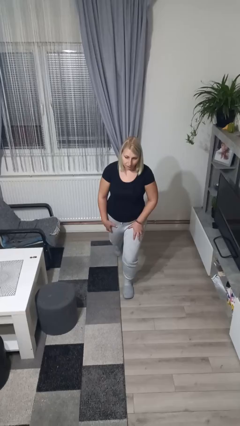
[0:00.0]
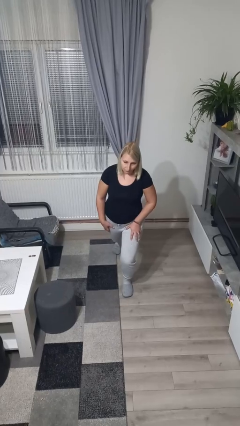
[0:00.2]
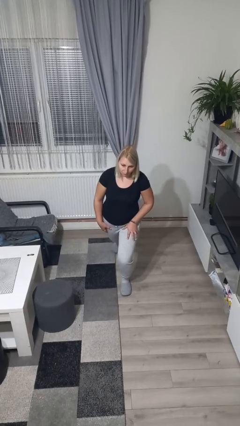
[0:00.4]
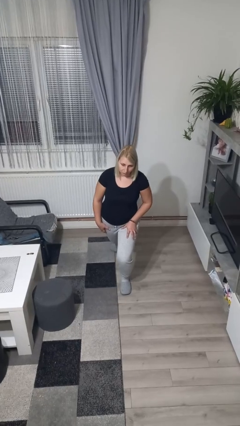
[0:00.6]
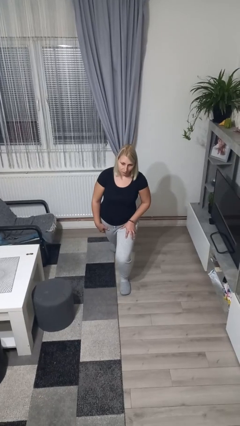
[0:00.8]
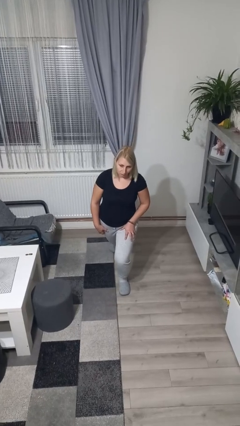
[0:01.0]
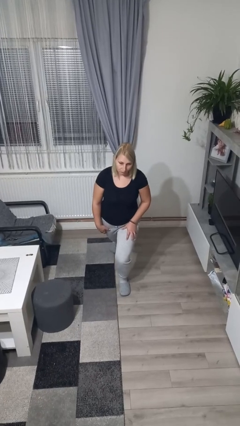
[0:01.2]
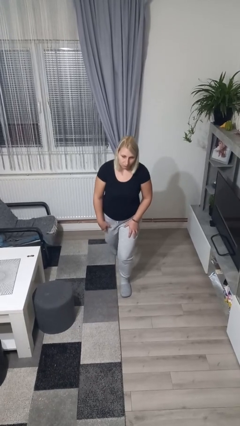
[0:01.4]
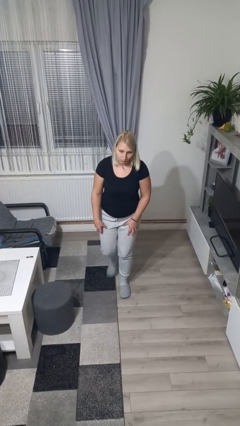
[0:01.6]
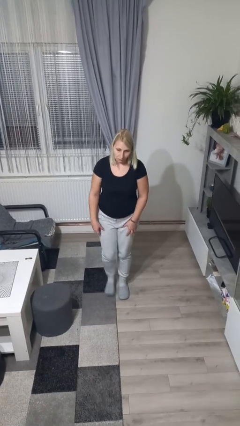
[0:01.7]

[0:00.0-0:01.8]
person exercises with lunges

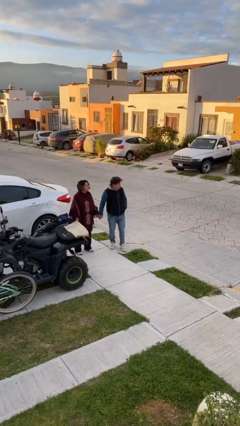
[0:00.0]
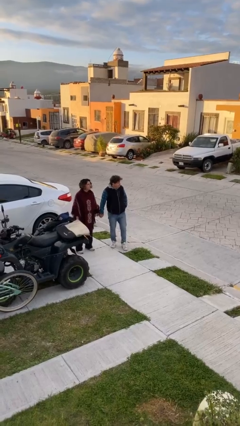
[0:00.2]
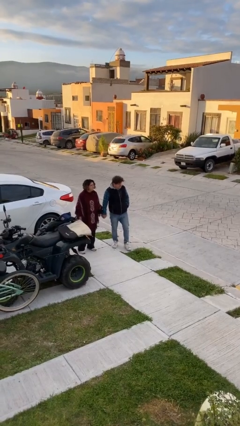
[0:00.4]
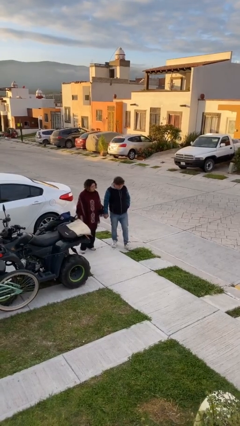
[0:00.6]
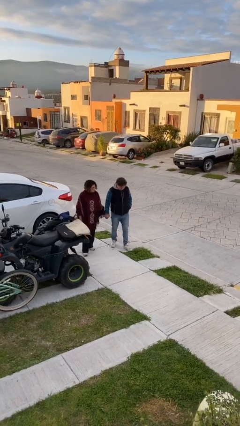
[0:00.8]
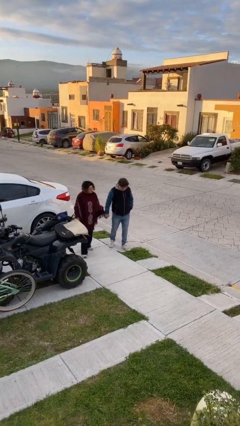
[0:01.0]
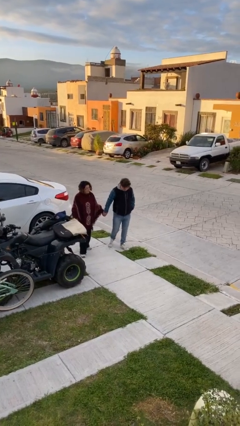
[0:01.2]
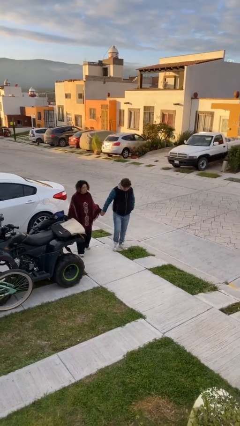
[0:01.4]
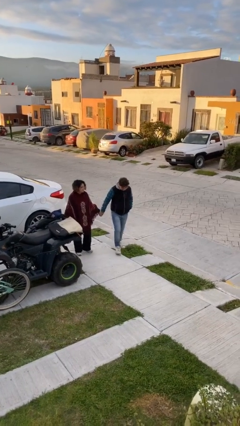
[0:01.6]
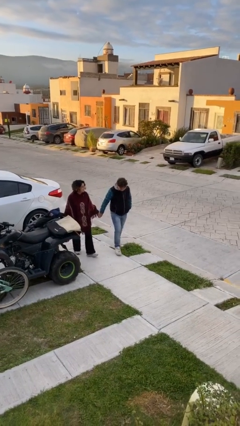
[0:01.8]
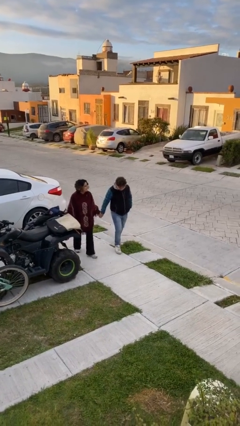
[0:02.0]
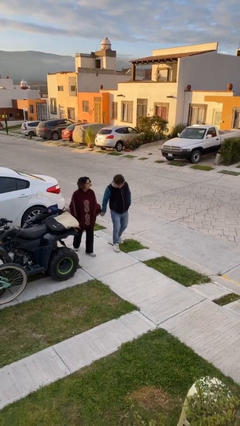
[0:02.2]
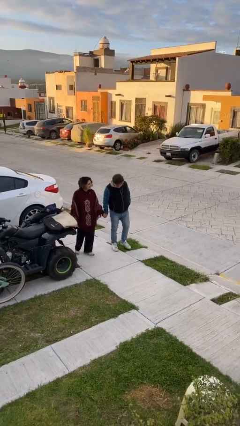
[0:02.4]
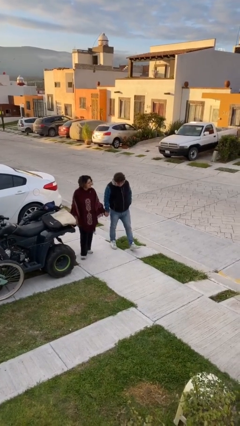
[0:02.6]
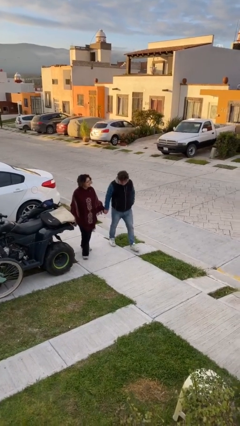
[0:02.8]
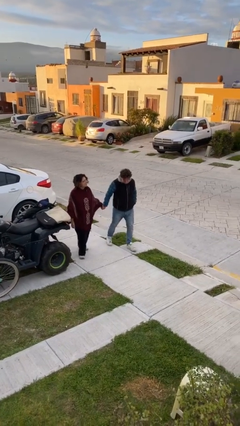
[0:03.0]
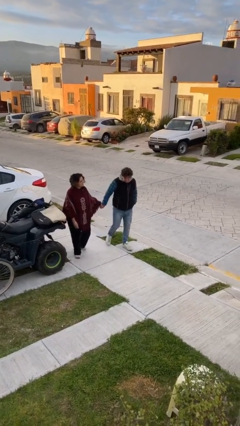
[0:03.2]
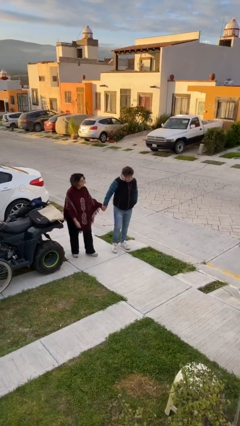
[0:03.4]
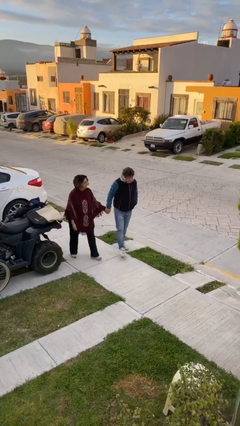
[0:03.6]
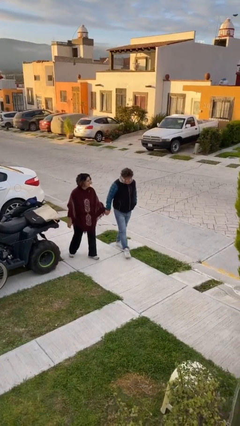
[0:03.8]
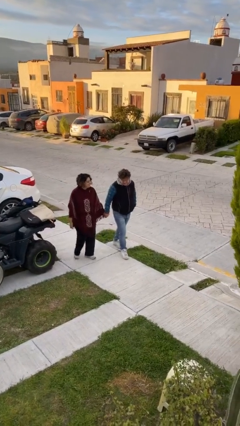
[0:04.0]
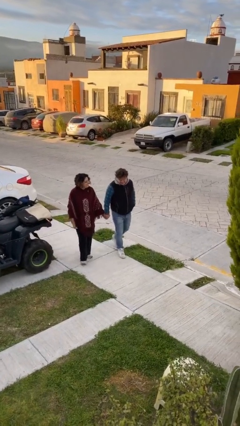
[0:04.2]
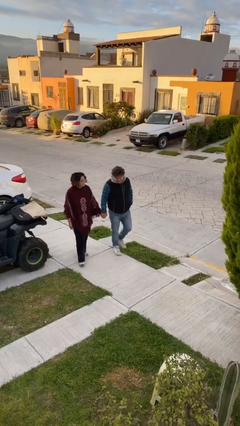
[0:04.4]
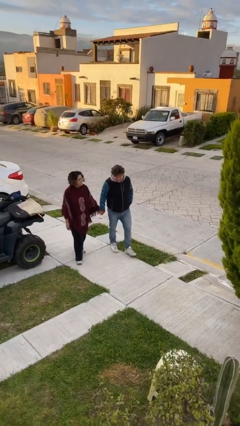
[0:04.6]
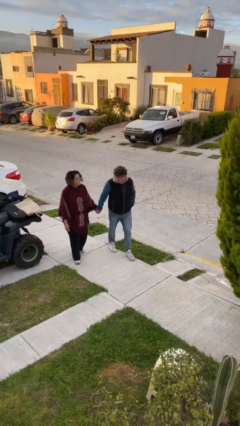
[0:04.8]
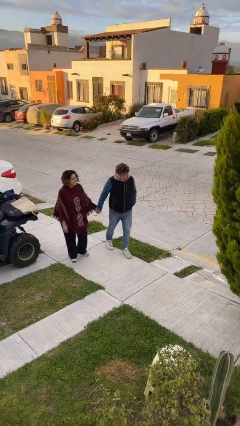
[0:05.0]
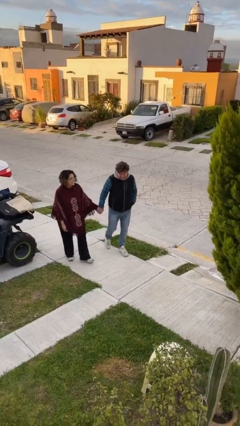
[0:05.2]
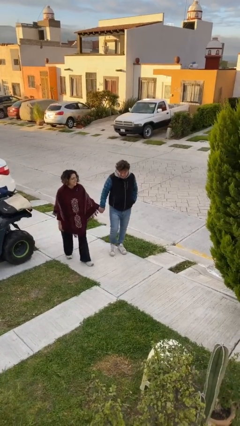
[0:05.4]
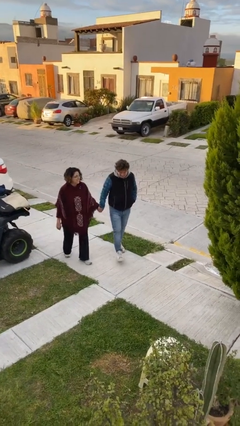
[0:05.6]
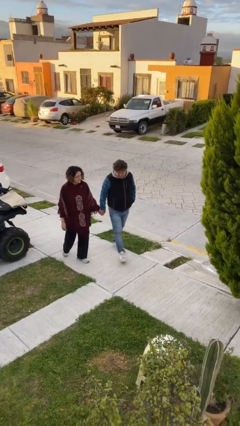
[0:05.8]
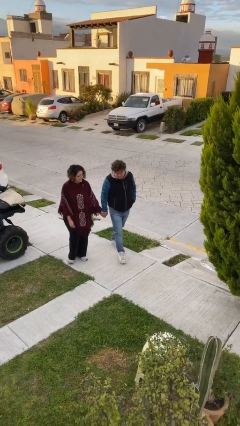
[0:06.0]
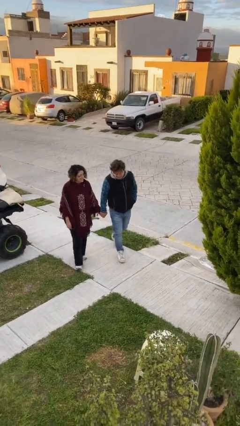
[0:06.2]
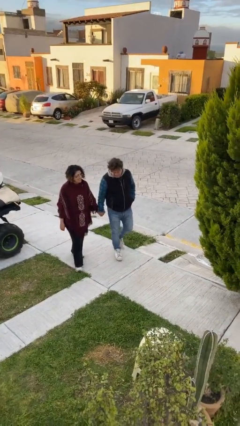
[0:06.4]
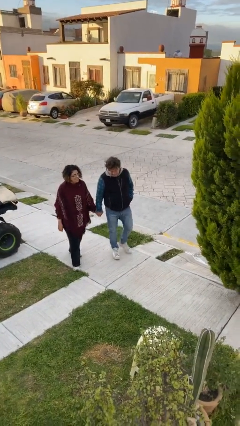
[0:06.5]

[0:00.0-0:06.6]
person holds hand

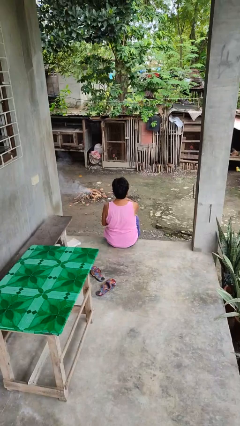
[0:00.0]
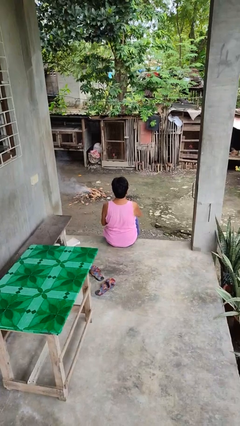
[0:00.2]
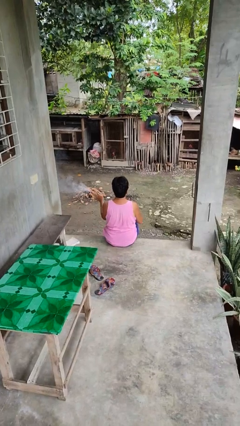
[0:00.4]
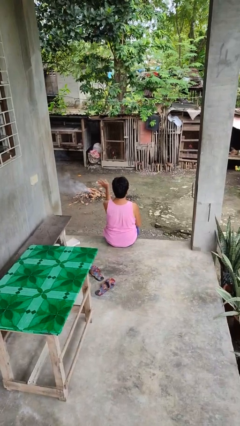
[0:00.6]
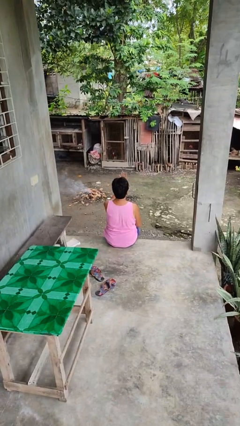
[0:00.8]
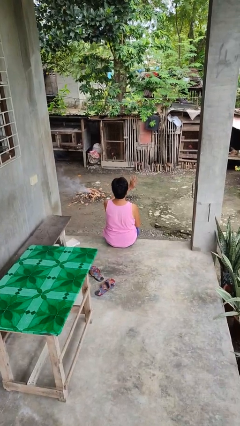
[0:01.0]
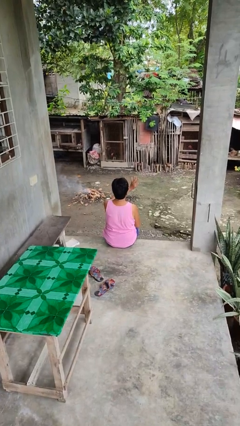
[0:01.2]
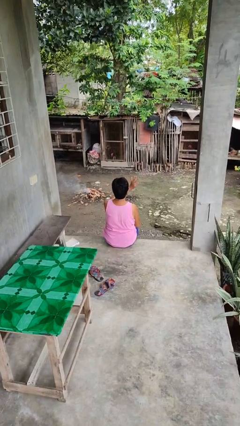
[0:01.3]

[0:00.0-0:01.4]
person gestures swipe right

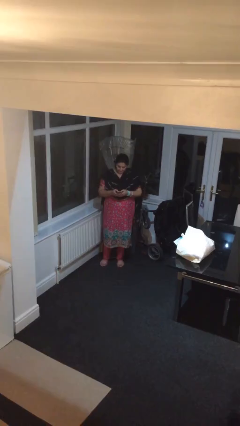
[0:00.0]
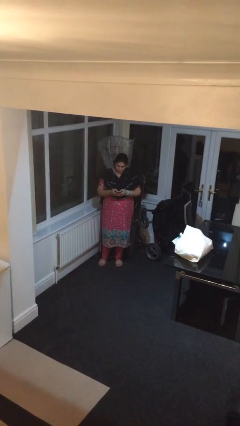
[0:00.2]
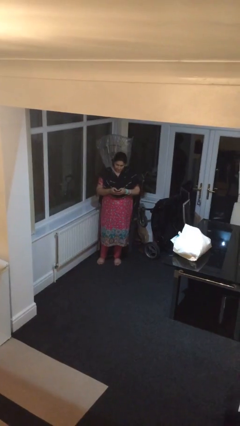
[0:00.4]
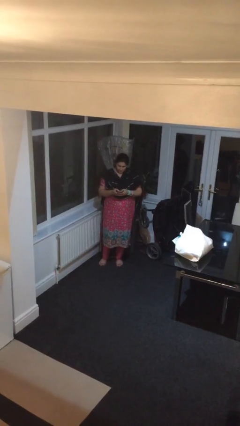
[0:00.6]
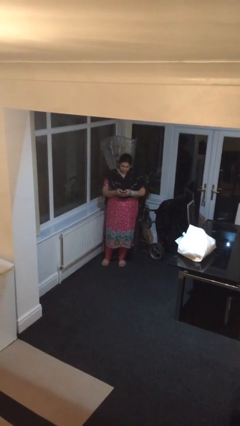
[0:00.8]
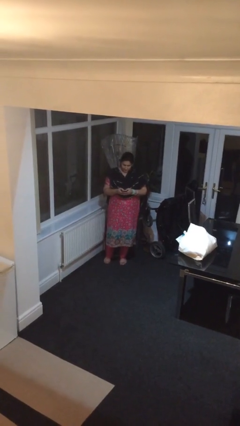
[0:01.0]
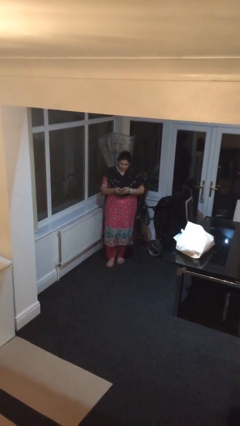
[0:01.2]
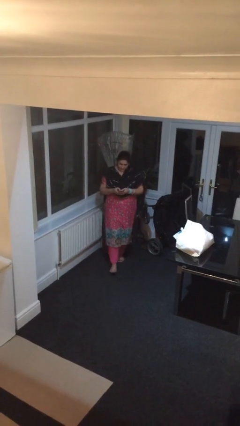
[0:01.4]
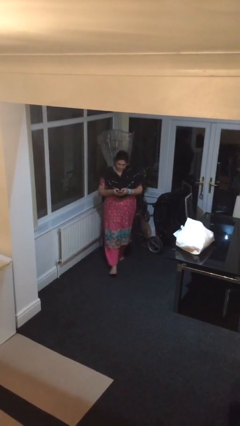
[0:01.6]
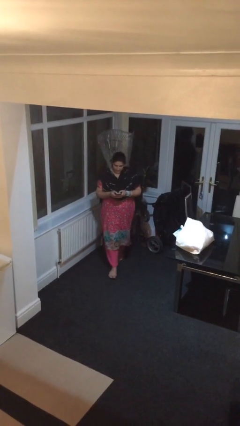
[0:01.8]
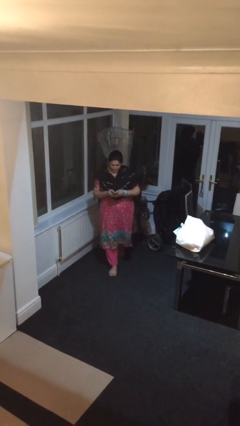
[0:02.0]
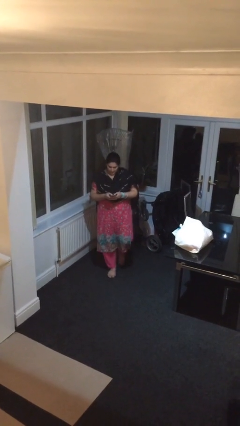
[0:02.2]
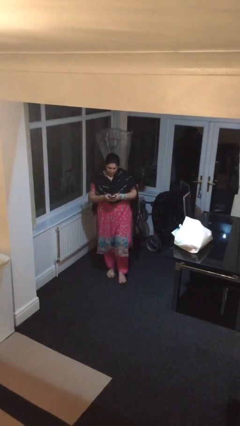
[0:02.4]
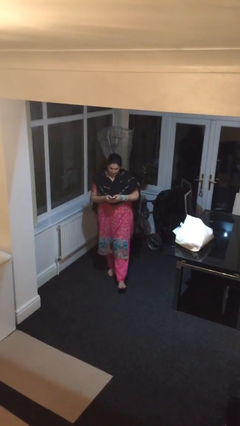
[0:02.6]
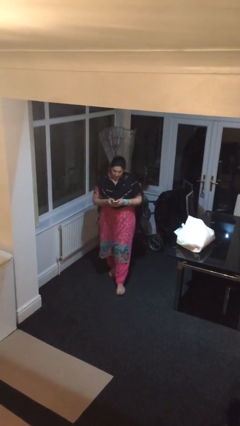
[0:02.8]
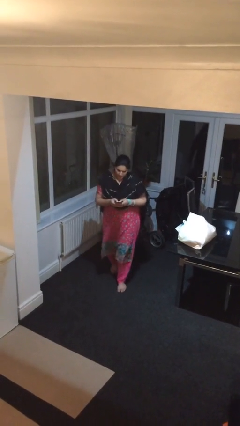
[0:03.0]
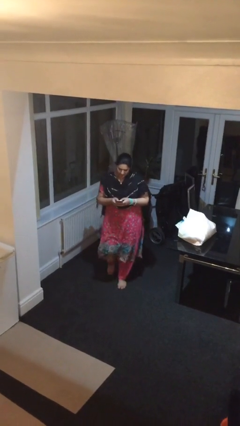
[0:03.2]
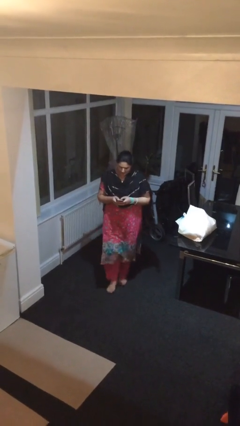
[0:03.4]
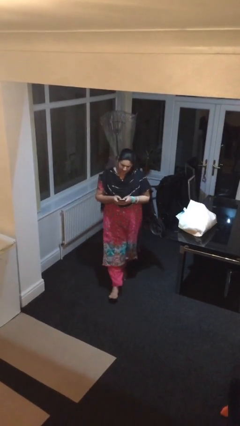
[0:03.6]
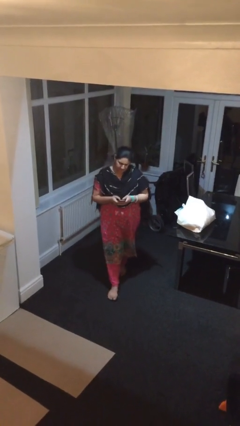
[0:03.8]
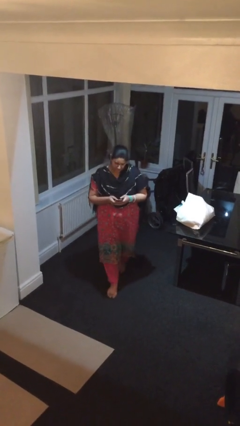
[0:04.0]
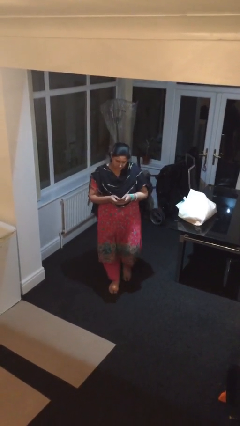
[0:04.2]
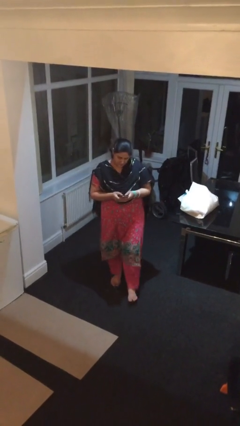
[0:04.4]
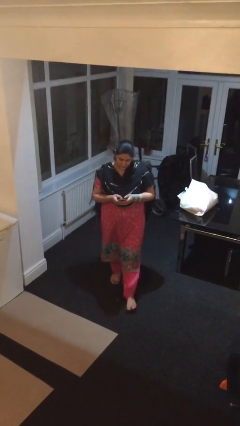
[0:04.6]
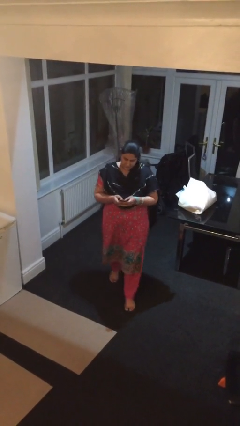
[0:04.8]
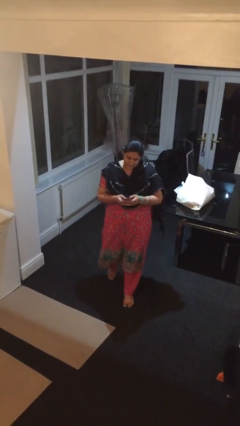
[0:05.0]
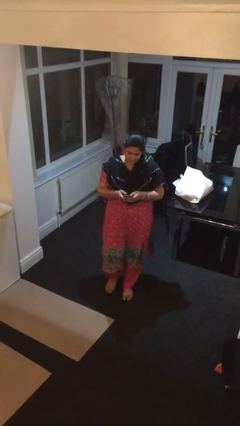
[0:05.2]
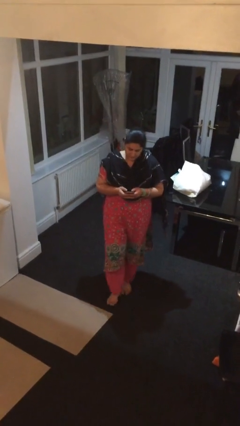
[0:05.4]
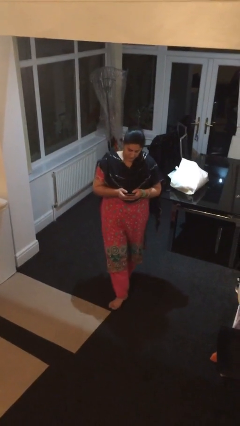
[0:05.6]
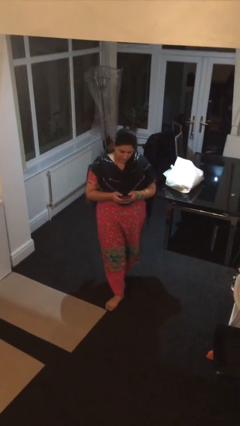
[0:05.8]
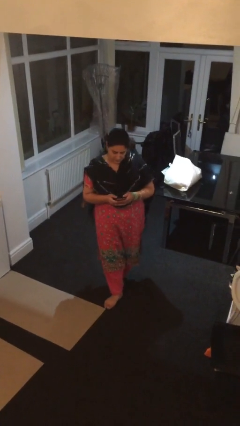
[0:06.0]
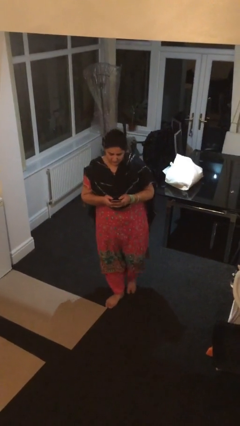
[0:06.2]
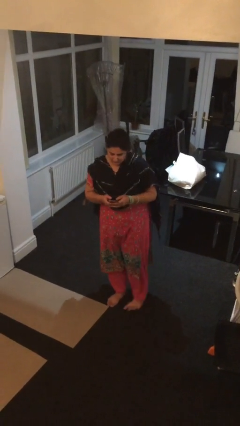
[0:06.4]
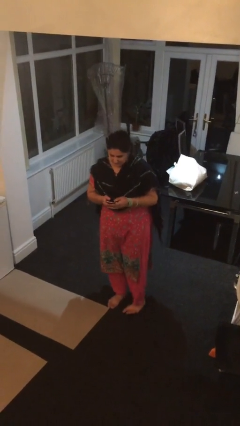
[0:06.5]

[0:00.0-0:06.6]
person texts on phone

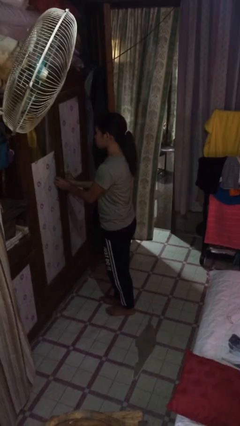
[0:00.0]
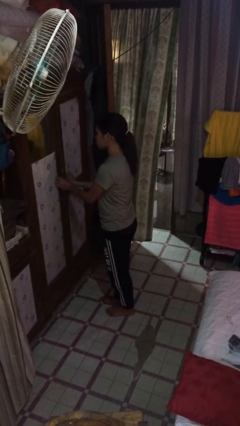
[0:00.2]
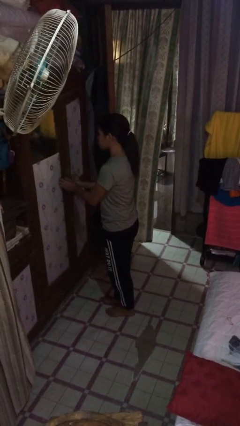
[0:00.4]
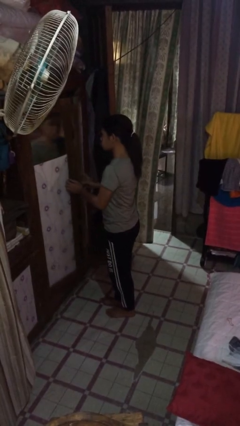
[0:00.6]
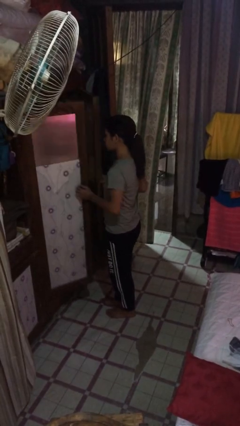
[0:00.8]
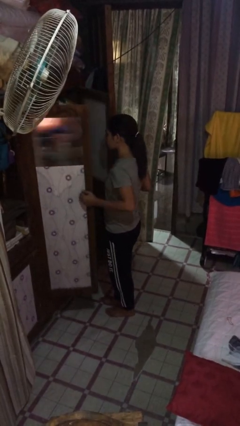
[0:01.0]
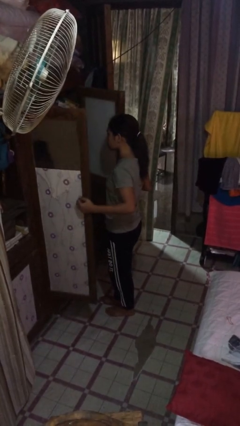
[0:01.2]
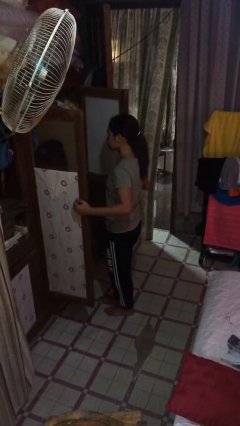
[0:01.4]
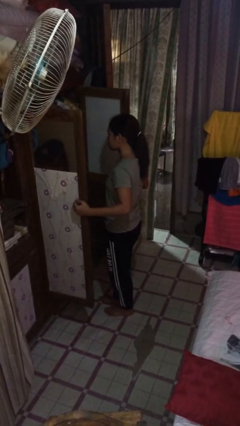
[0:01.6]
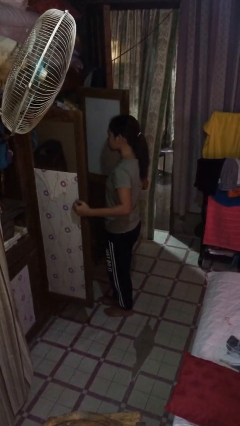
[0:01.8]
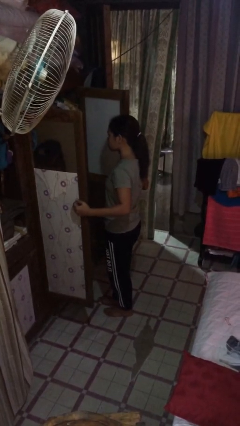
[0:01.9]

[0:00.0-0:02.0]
person opens closet door
